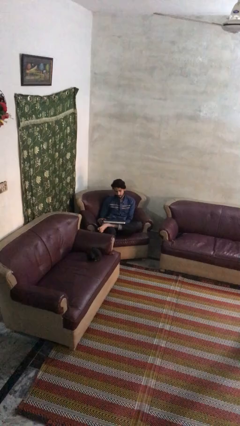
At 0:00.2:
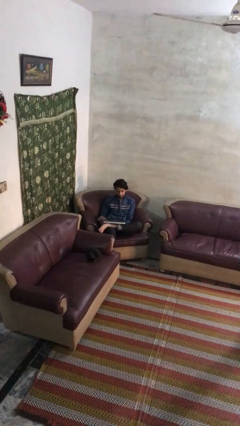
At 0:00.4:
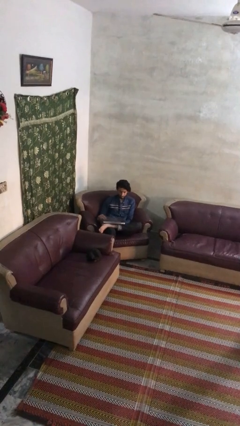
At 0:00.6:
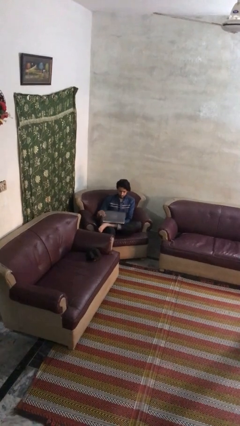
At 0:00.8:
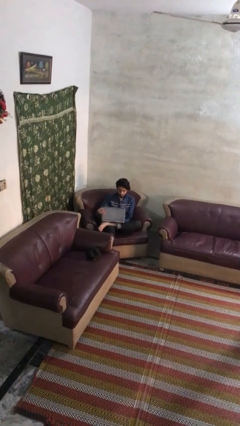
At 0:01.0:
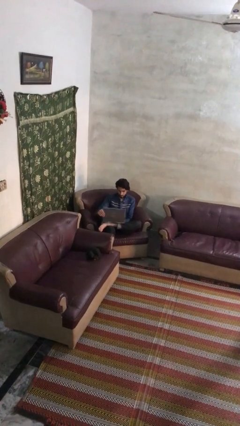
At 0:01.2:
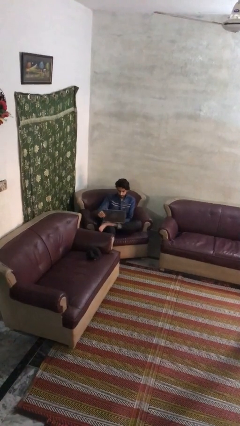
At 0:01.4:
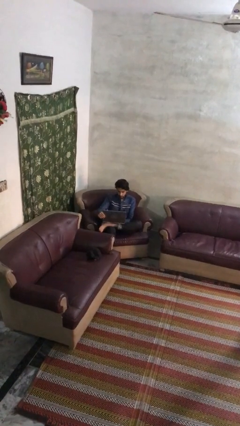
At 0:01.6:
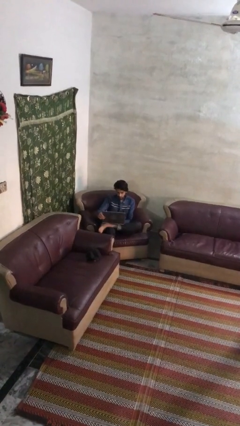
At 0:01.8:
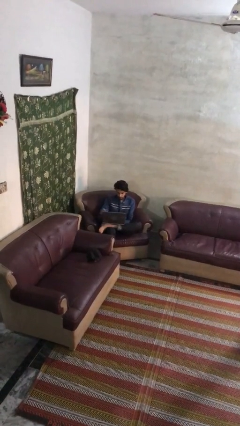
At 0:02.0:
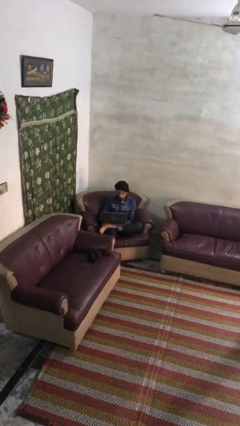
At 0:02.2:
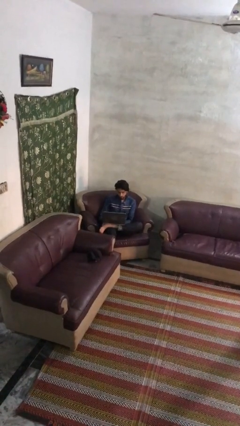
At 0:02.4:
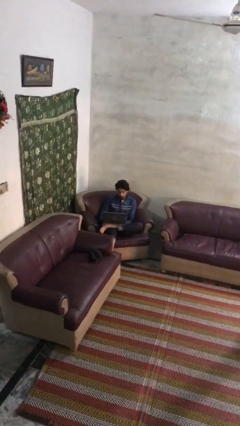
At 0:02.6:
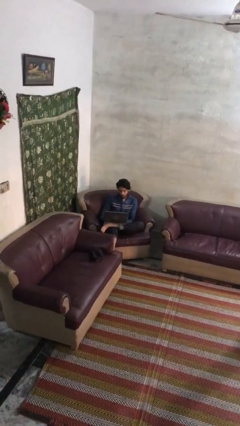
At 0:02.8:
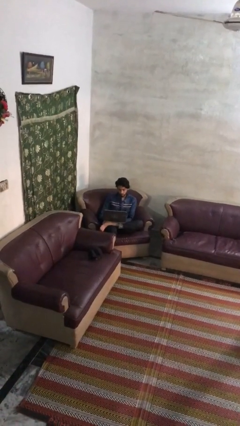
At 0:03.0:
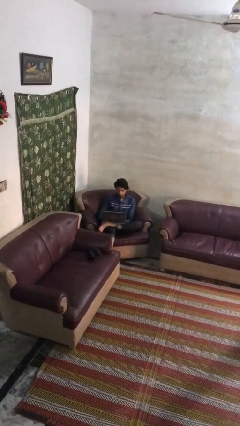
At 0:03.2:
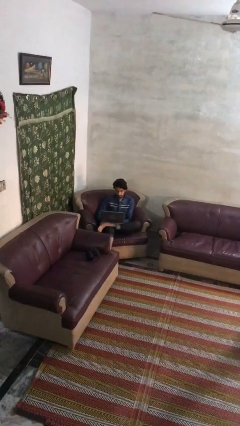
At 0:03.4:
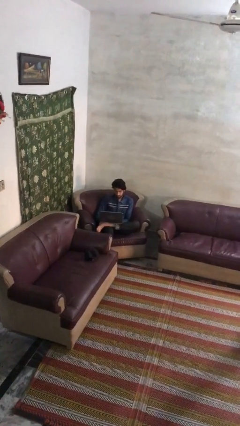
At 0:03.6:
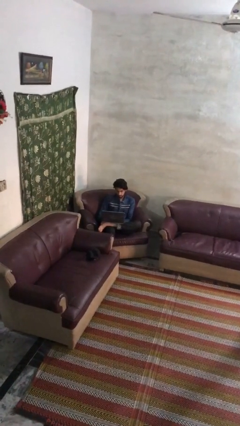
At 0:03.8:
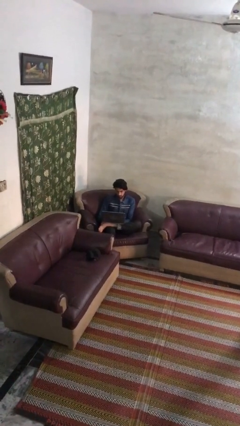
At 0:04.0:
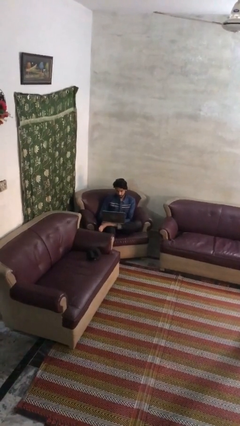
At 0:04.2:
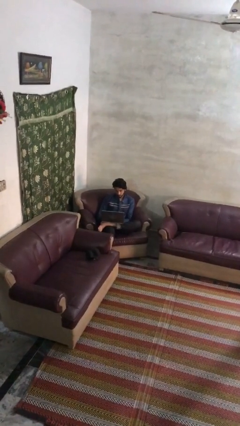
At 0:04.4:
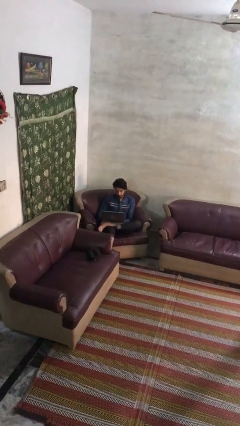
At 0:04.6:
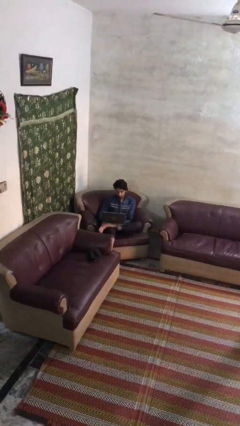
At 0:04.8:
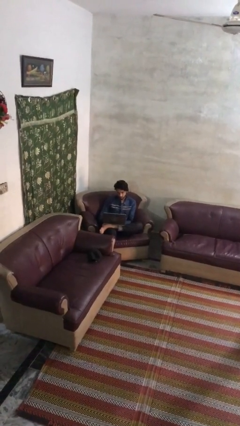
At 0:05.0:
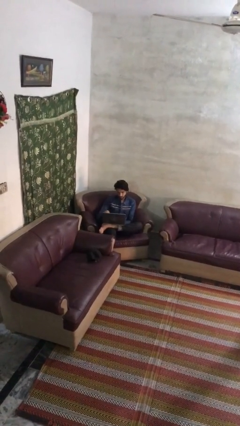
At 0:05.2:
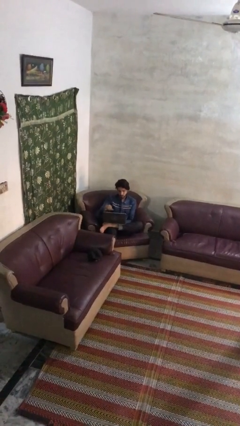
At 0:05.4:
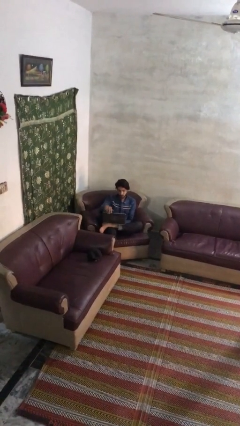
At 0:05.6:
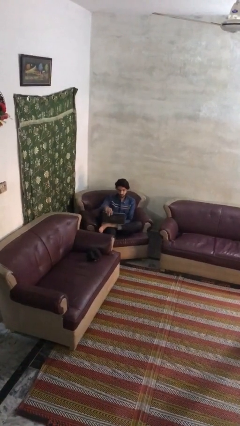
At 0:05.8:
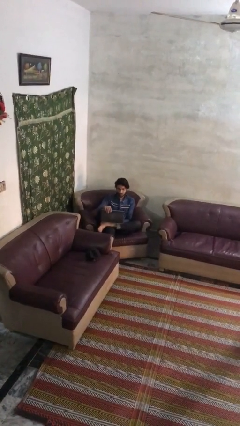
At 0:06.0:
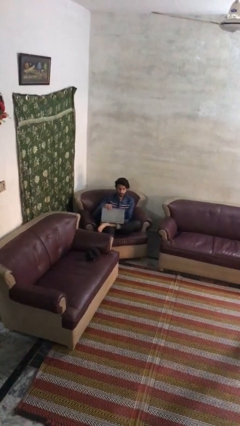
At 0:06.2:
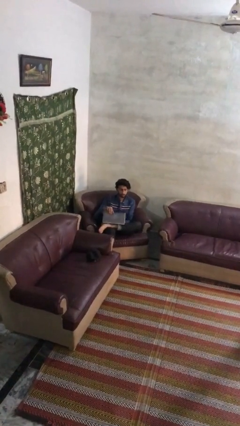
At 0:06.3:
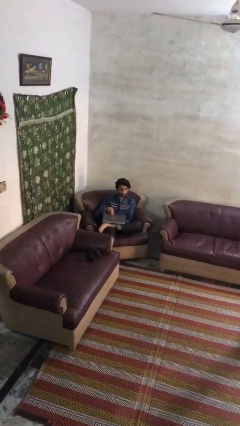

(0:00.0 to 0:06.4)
person interacts with laptop

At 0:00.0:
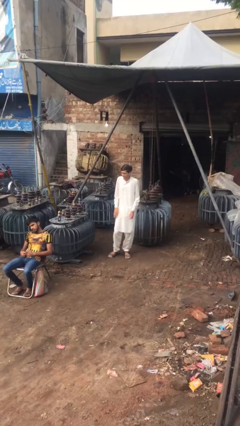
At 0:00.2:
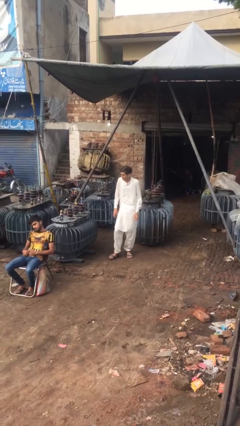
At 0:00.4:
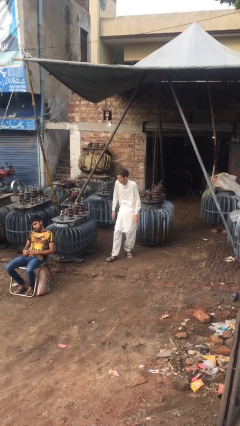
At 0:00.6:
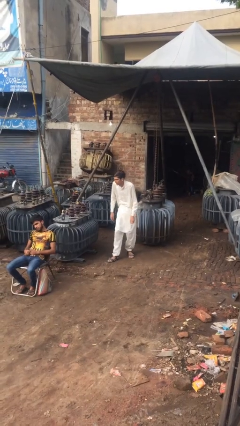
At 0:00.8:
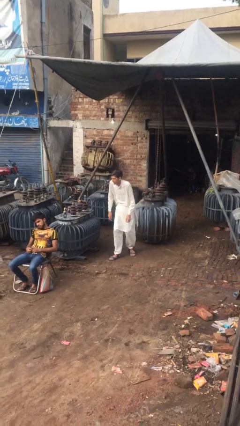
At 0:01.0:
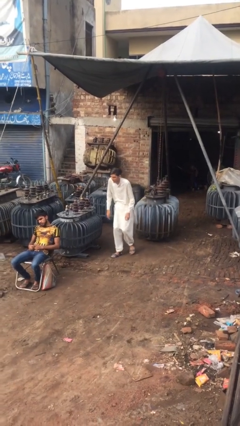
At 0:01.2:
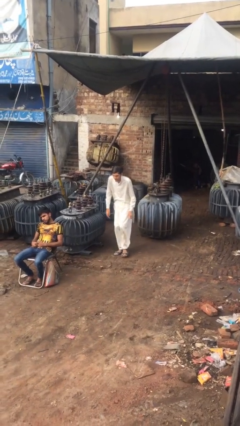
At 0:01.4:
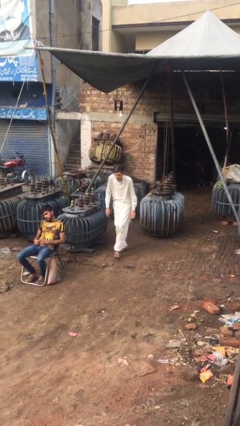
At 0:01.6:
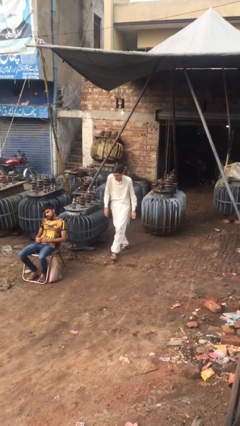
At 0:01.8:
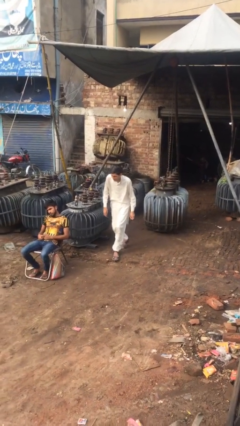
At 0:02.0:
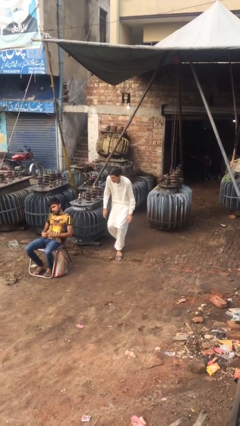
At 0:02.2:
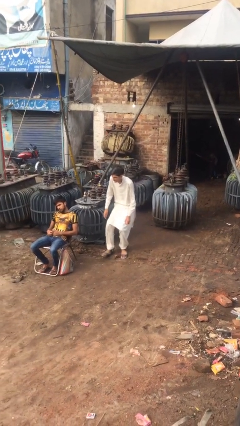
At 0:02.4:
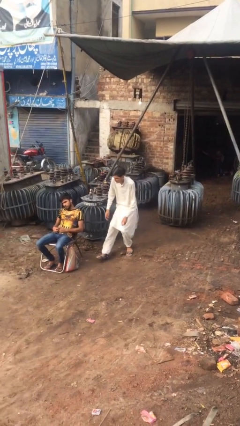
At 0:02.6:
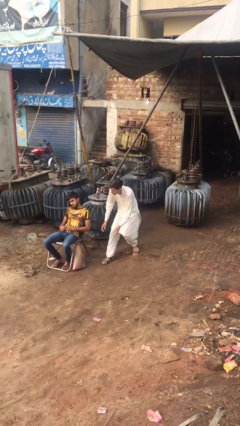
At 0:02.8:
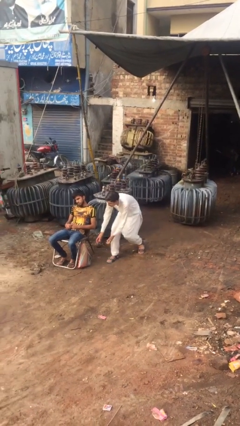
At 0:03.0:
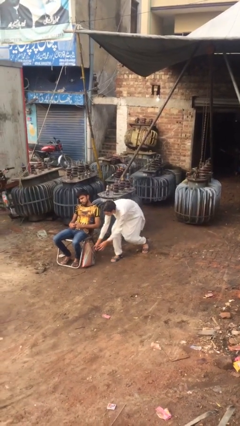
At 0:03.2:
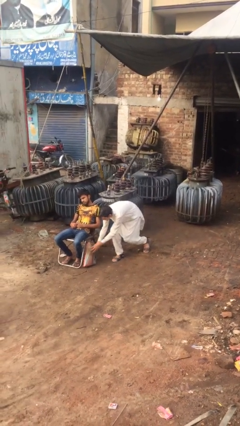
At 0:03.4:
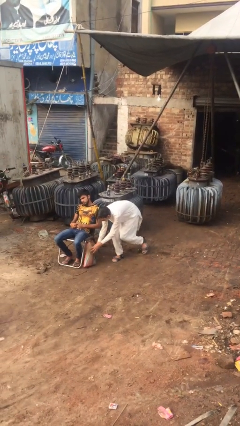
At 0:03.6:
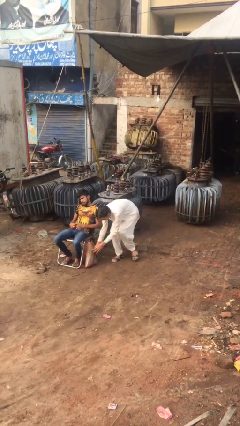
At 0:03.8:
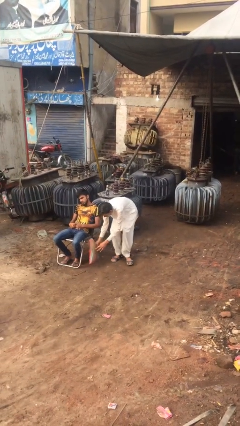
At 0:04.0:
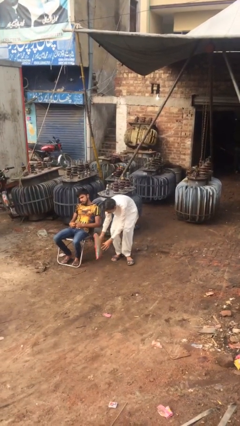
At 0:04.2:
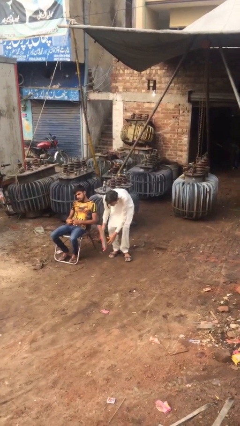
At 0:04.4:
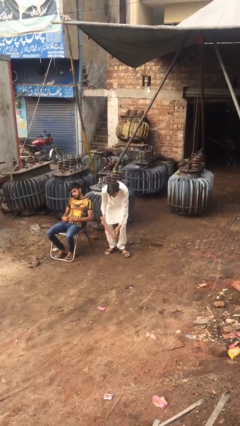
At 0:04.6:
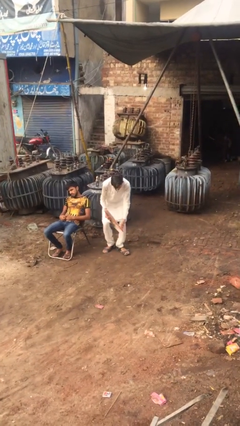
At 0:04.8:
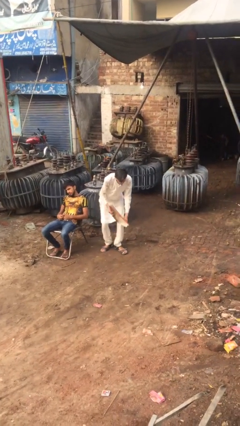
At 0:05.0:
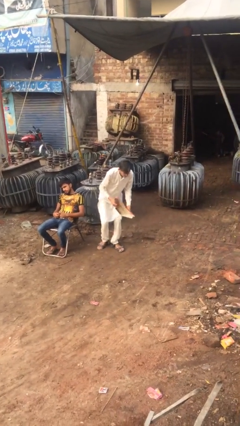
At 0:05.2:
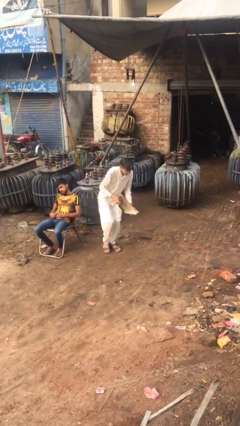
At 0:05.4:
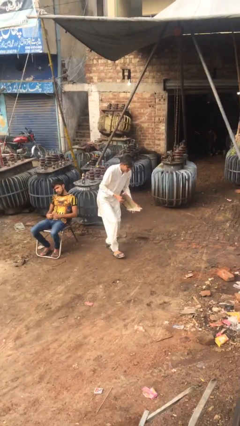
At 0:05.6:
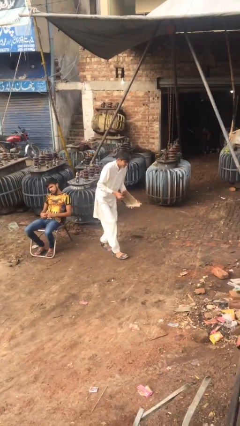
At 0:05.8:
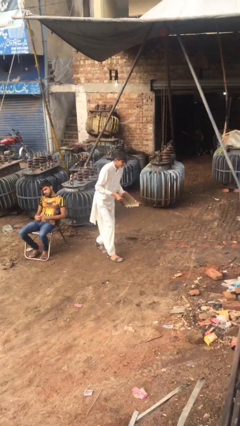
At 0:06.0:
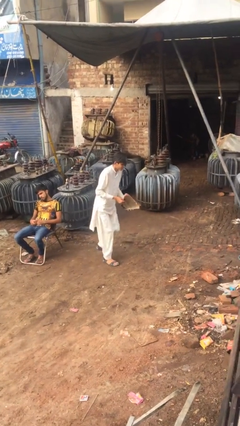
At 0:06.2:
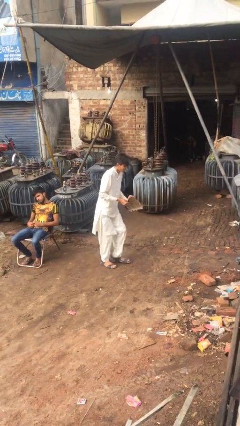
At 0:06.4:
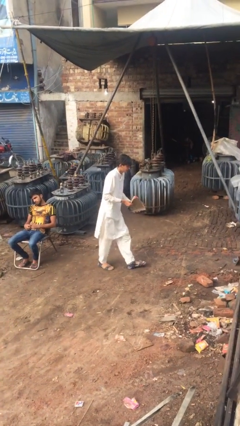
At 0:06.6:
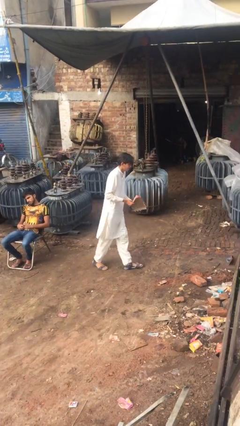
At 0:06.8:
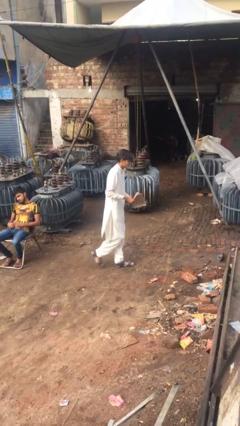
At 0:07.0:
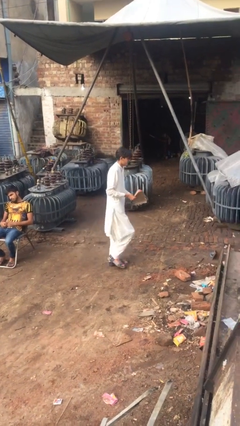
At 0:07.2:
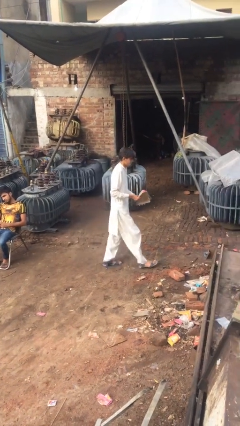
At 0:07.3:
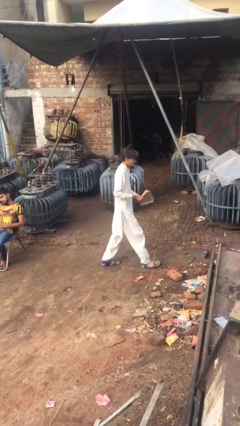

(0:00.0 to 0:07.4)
person steals object from person

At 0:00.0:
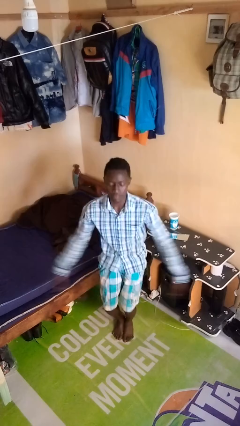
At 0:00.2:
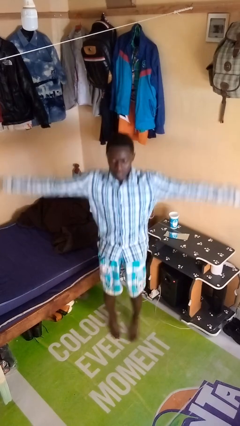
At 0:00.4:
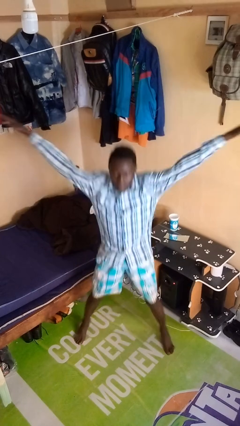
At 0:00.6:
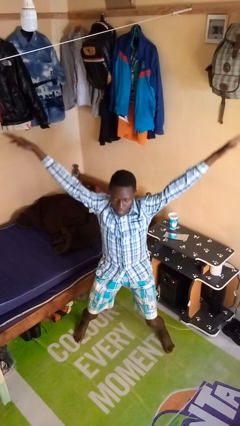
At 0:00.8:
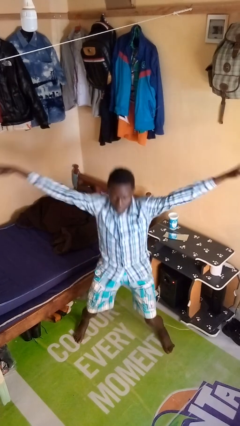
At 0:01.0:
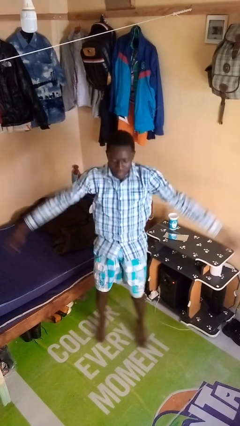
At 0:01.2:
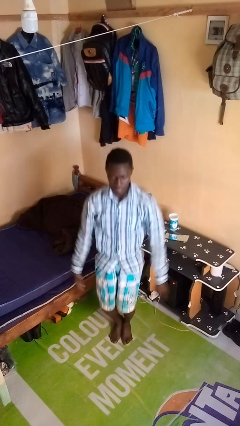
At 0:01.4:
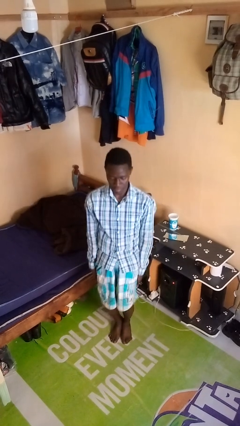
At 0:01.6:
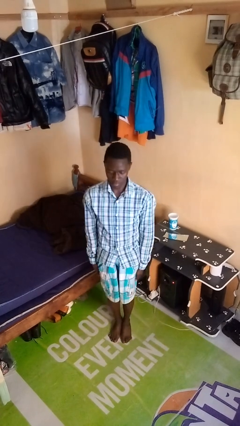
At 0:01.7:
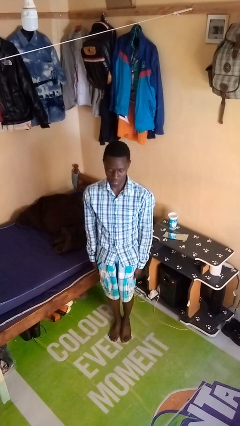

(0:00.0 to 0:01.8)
person exercises with jumping jacks

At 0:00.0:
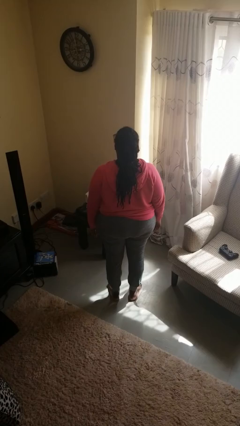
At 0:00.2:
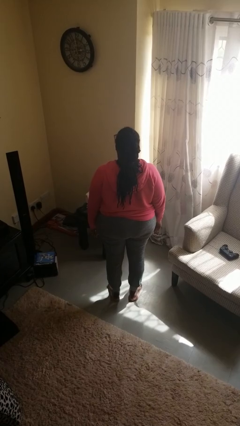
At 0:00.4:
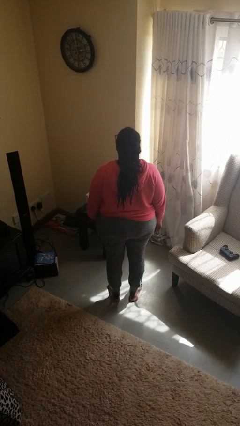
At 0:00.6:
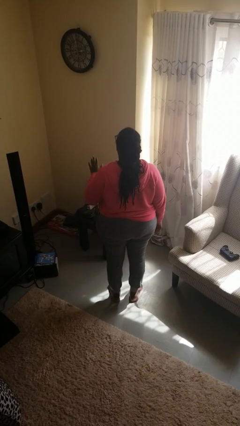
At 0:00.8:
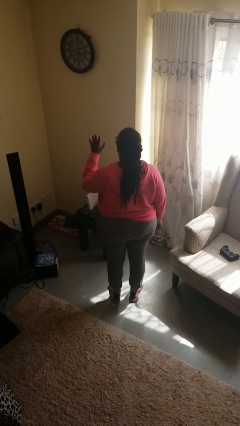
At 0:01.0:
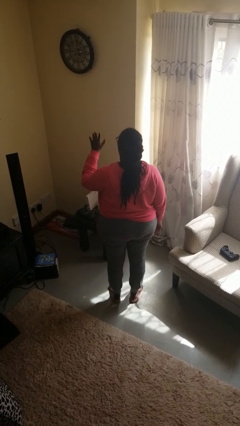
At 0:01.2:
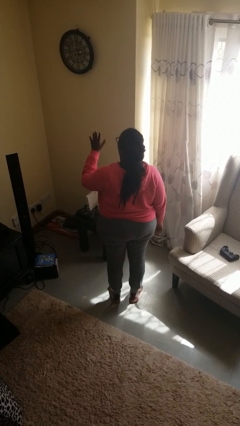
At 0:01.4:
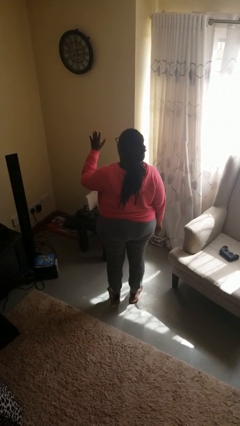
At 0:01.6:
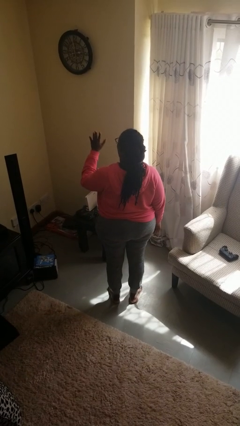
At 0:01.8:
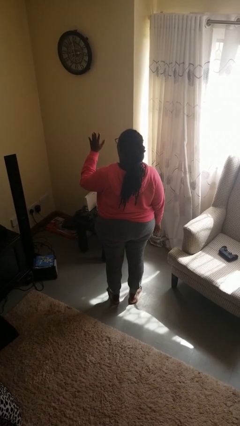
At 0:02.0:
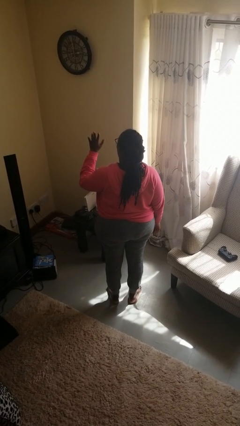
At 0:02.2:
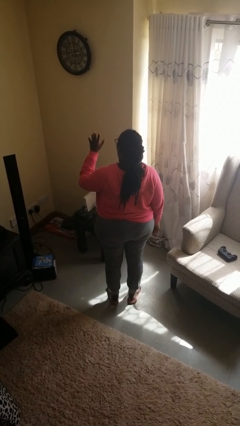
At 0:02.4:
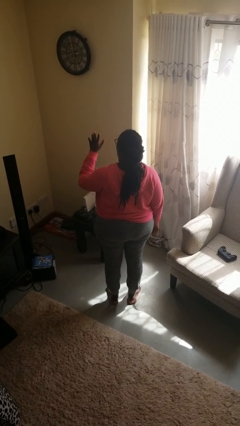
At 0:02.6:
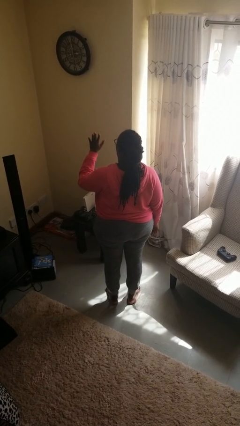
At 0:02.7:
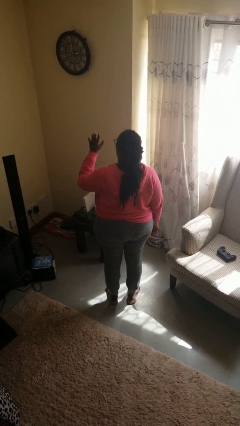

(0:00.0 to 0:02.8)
person gestures number five
